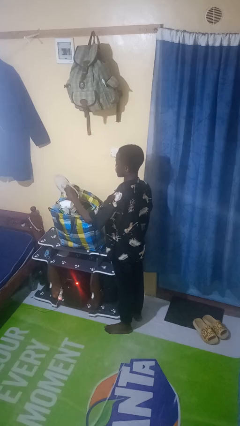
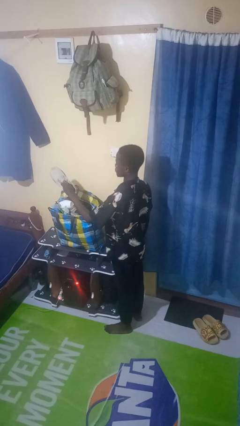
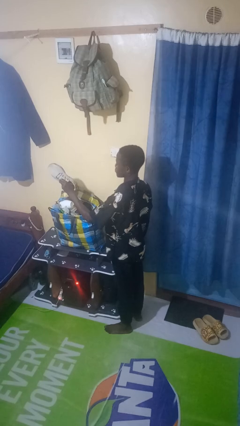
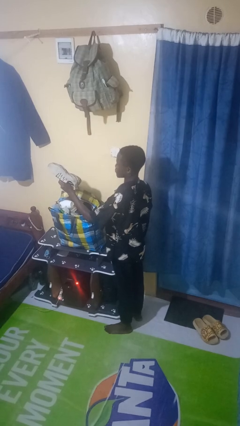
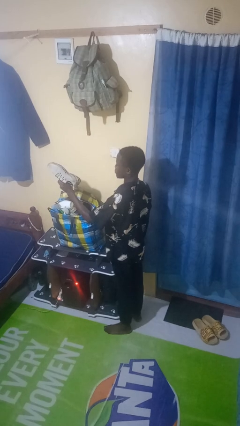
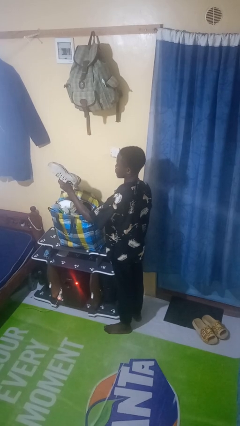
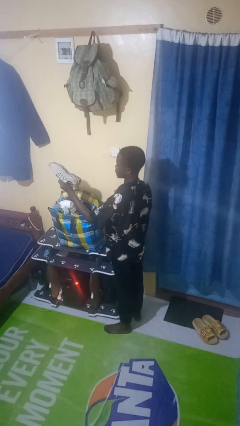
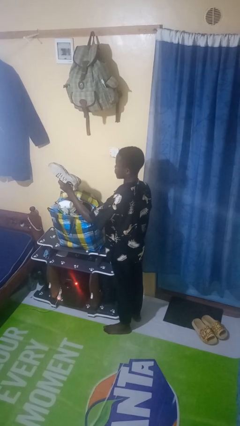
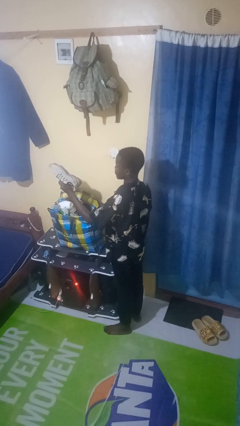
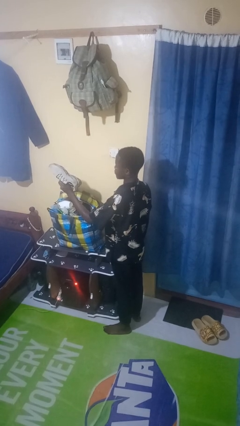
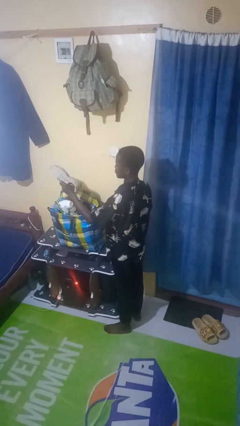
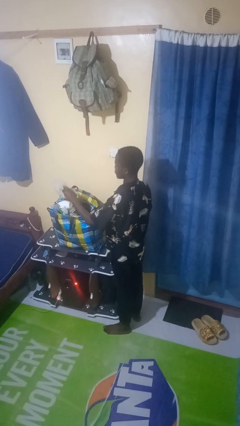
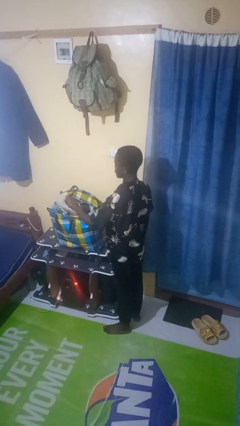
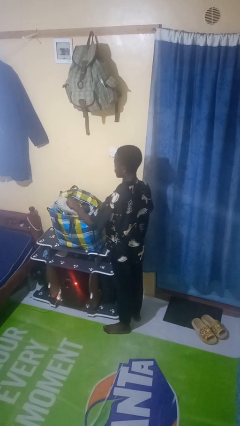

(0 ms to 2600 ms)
person takes object from bag

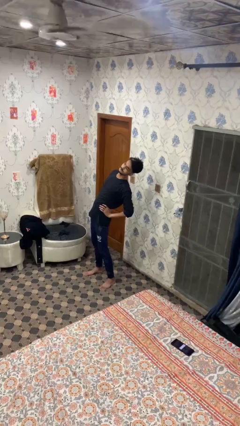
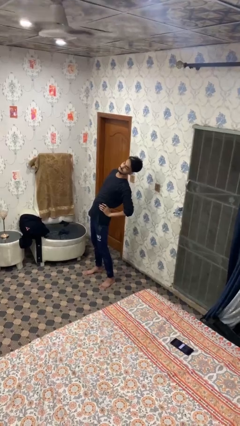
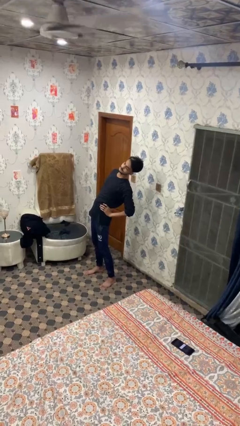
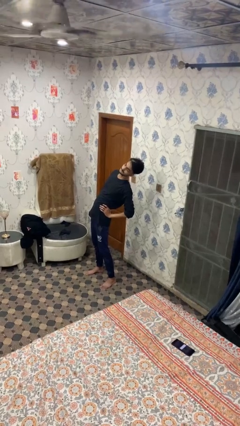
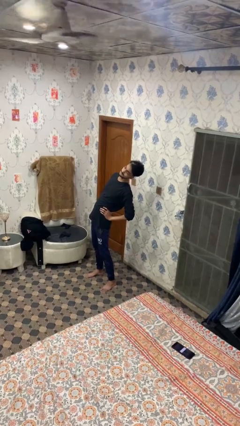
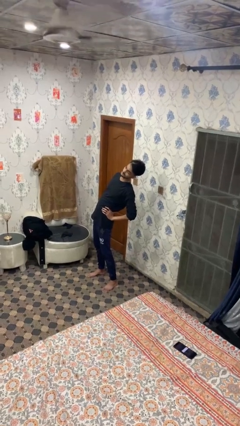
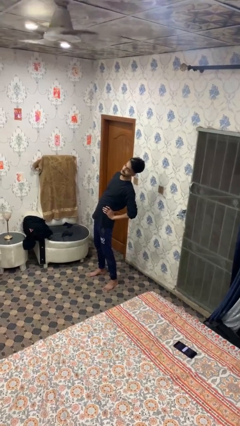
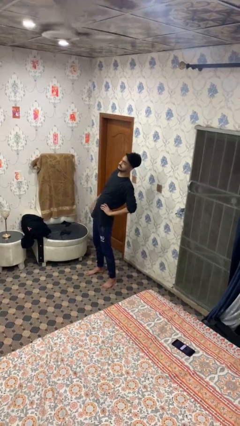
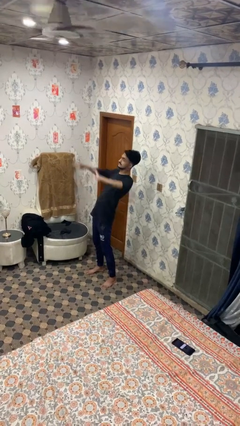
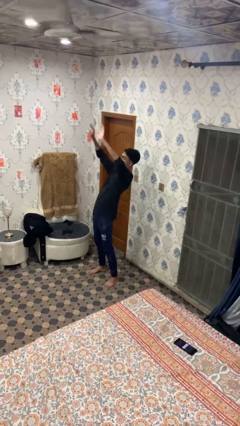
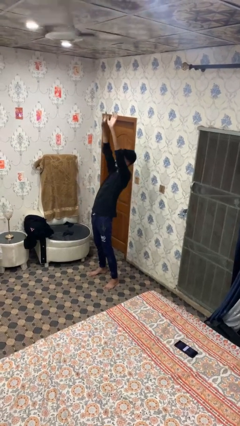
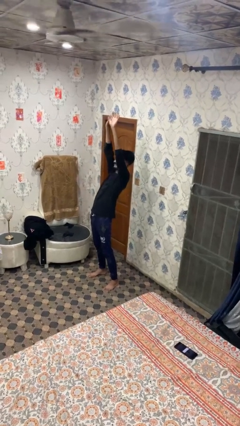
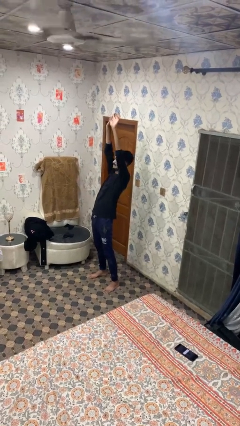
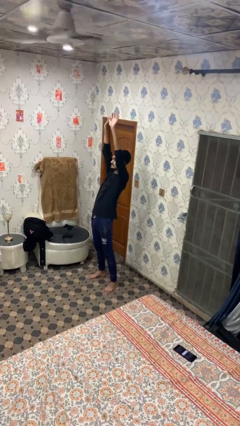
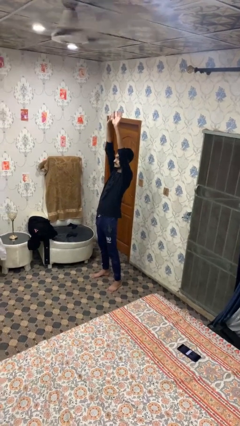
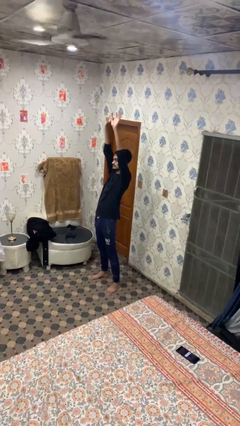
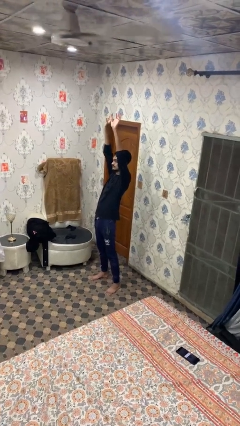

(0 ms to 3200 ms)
person stretches arms over head

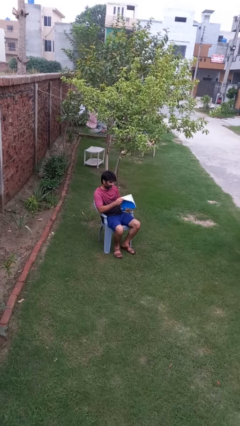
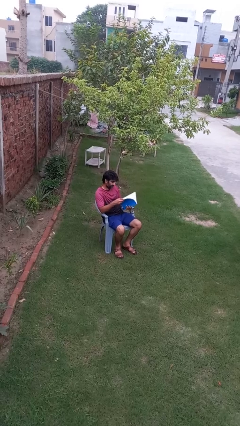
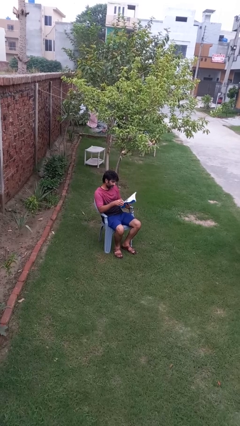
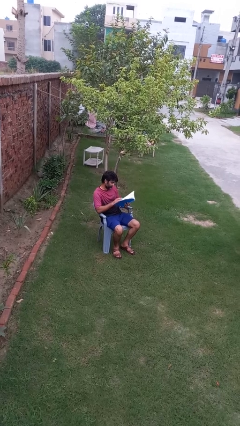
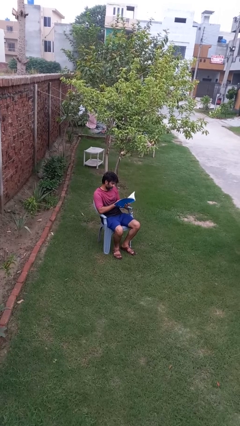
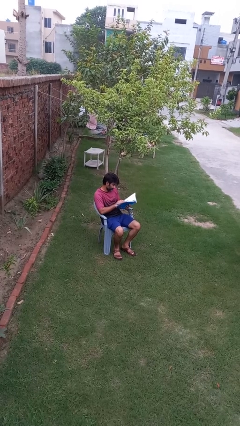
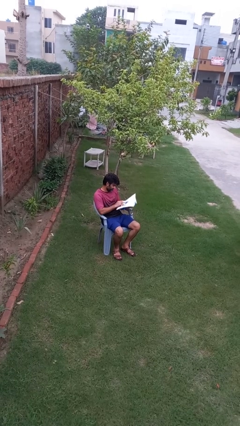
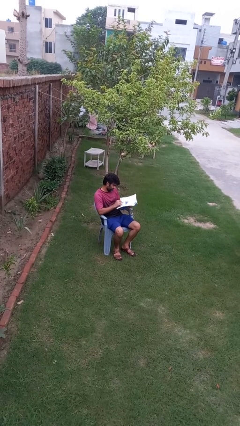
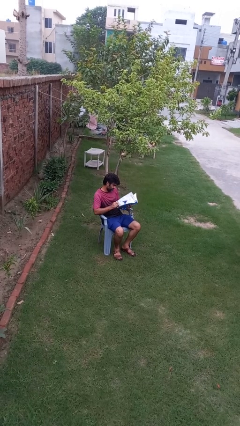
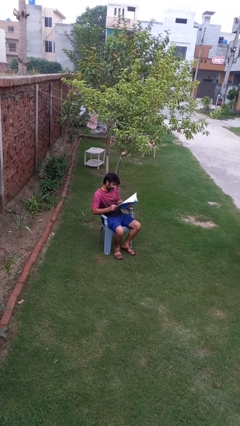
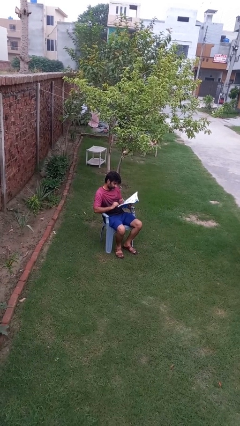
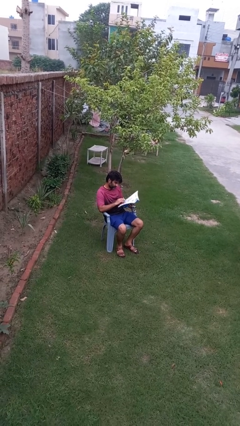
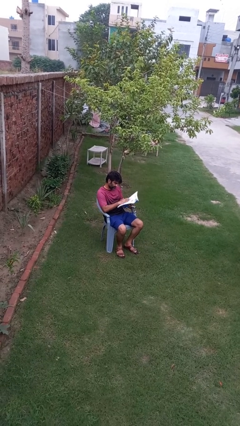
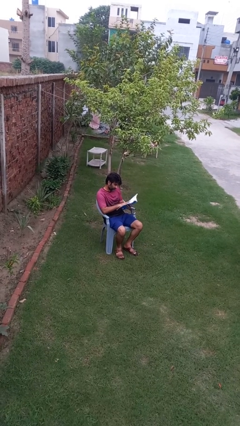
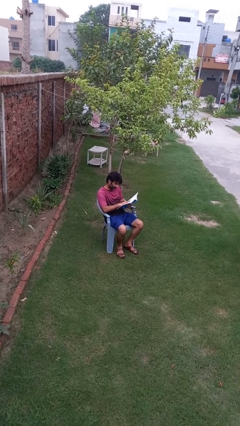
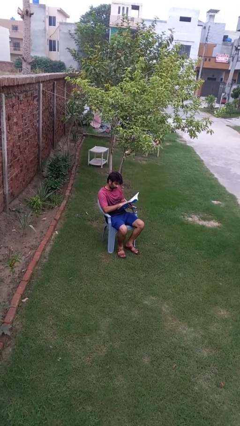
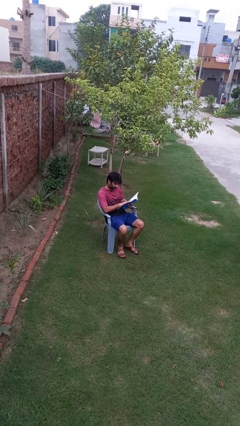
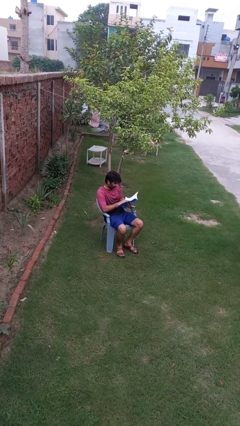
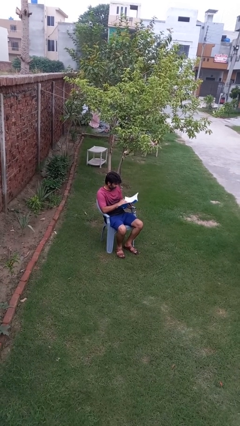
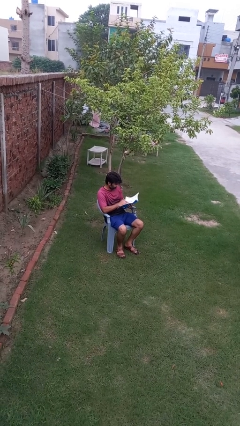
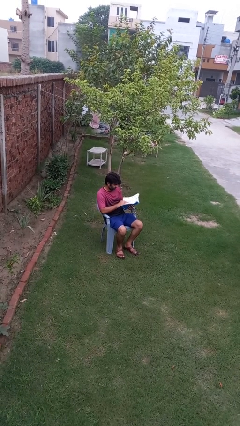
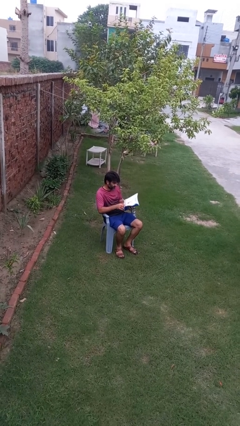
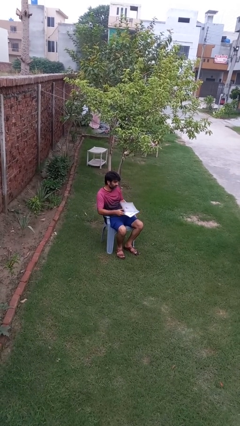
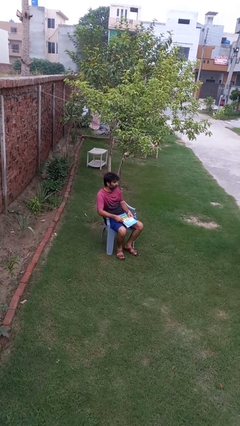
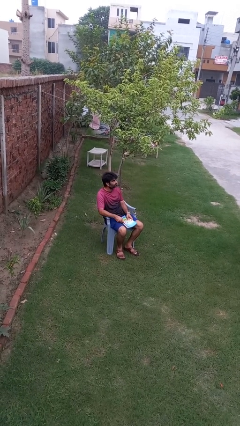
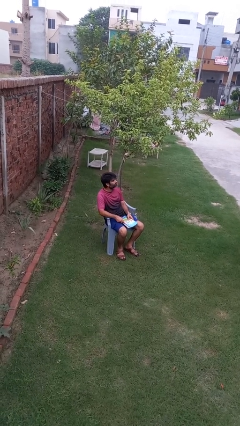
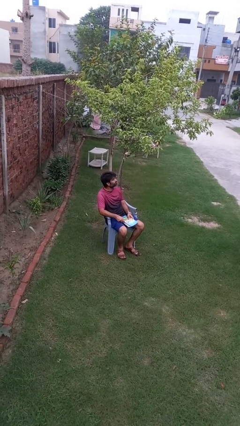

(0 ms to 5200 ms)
person reads book

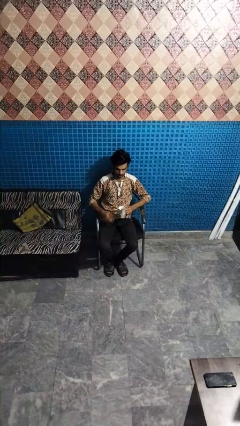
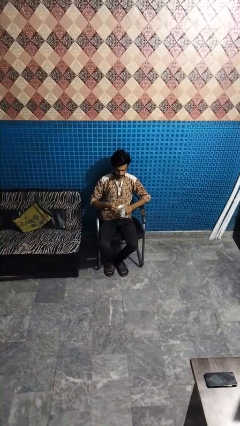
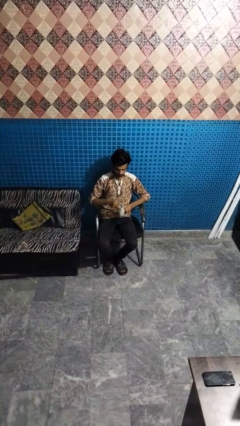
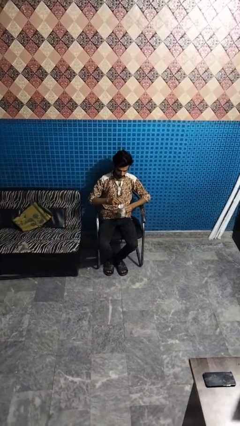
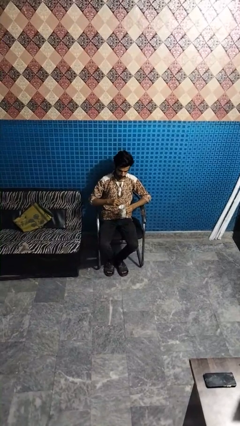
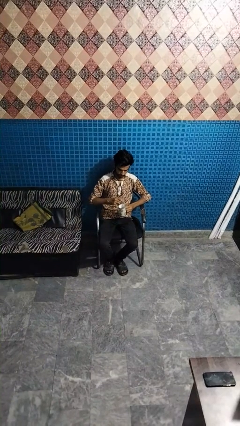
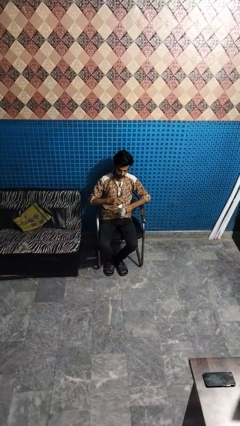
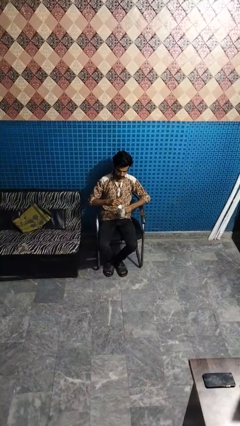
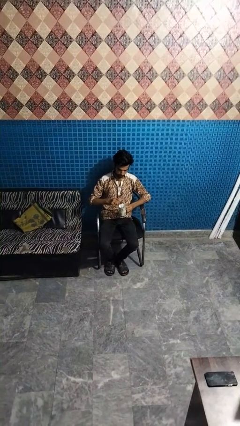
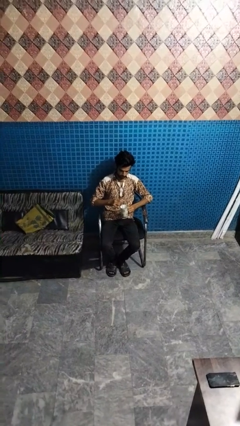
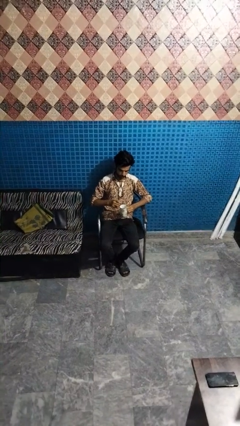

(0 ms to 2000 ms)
person stirs mug

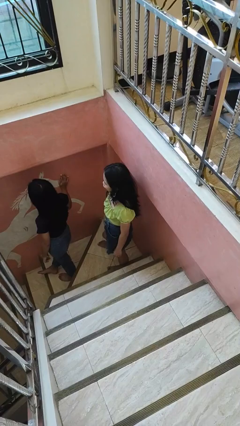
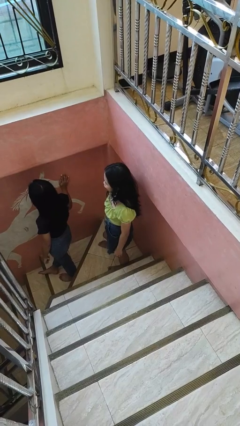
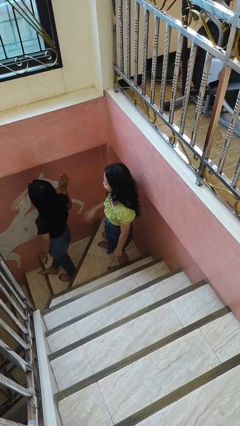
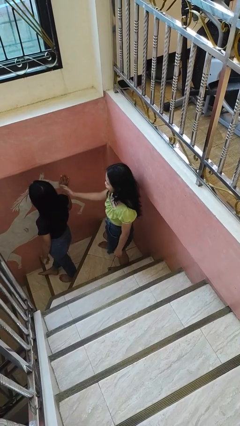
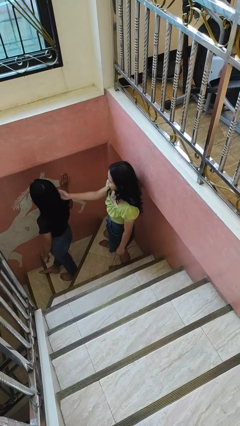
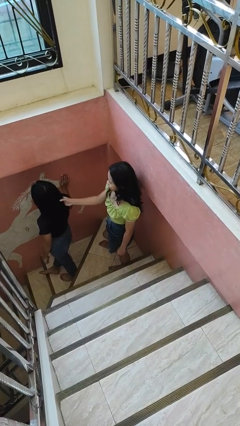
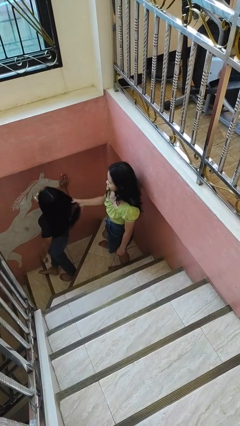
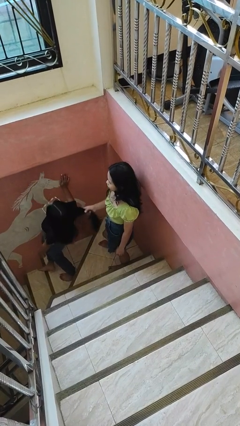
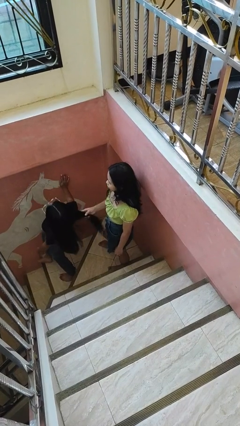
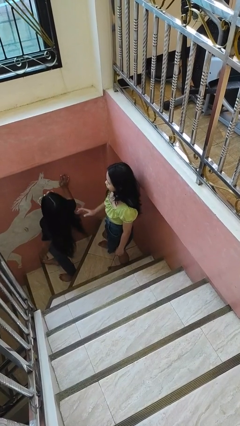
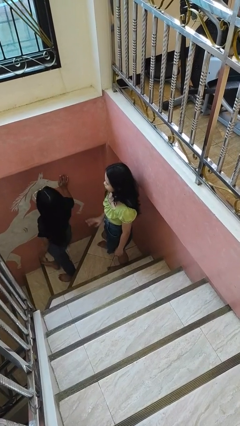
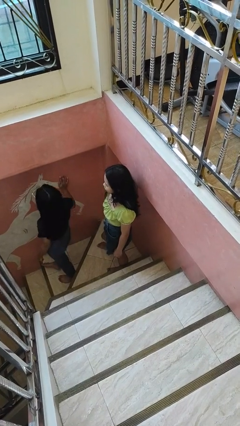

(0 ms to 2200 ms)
person grabs person by hair

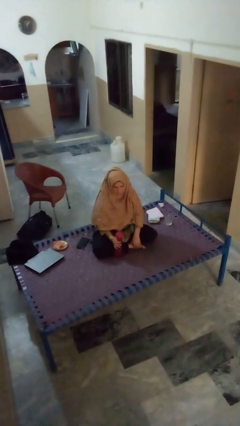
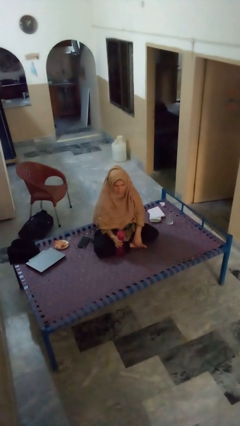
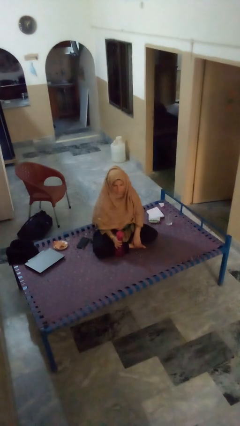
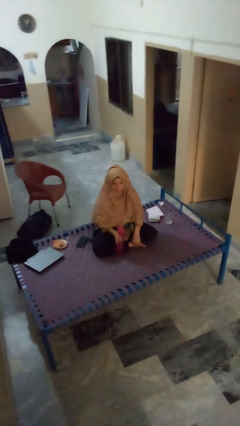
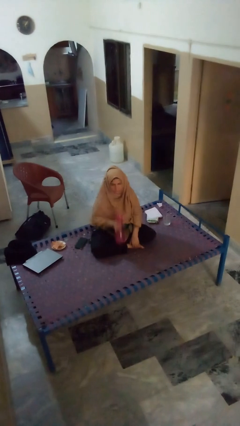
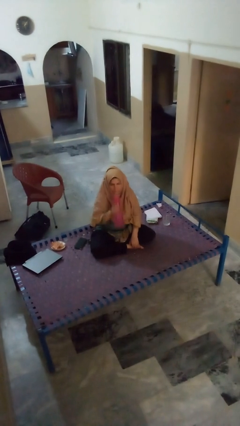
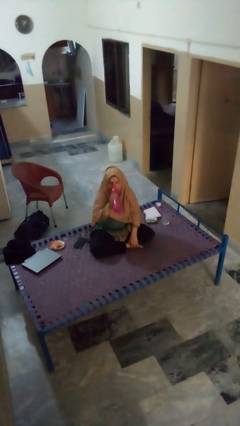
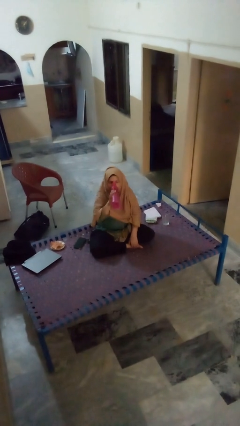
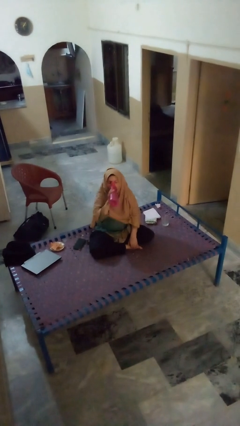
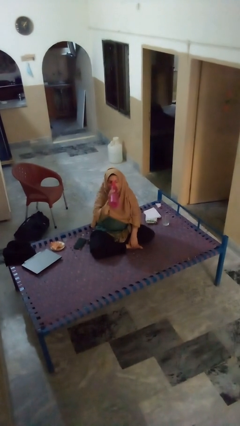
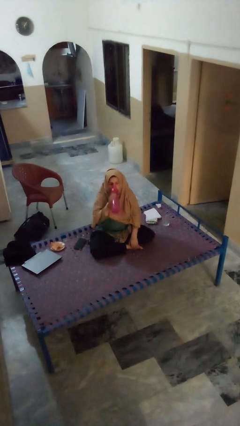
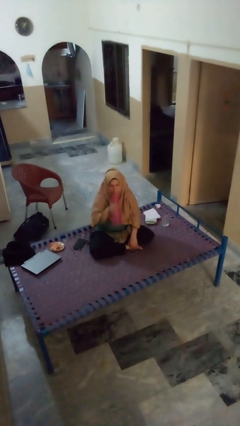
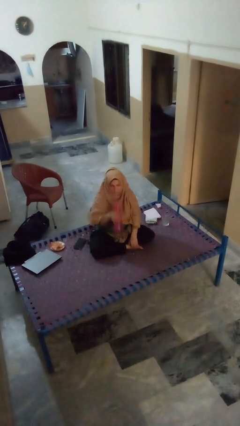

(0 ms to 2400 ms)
person drinks from bottle
